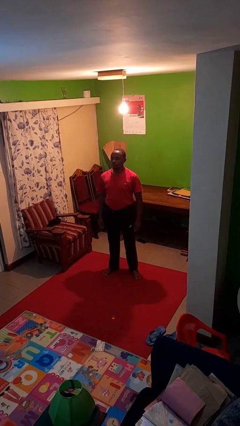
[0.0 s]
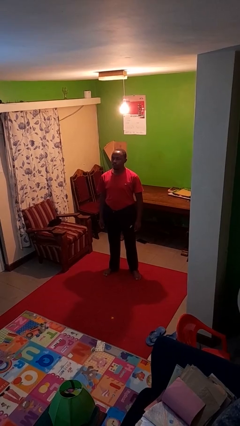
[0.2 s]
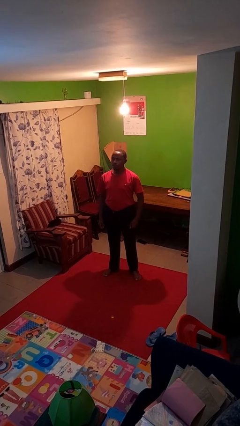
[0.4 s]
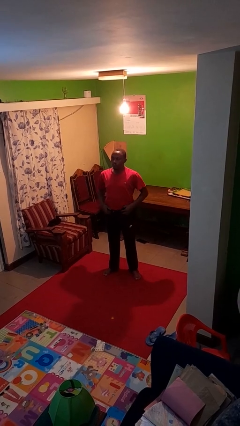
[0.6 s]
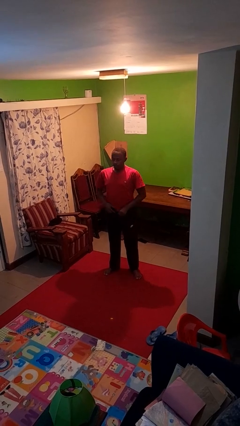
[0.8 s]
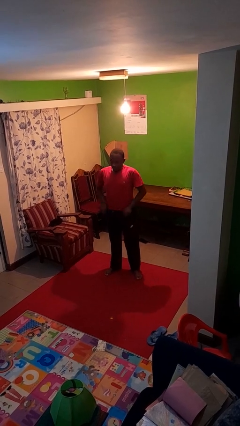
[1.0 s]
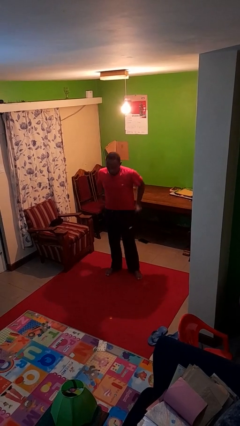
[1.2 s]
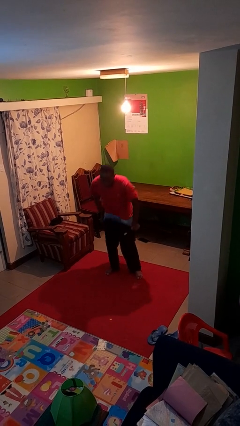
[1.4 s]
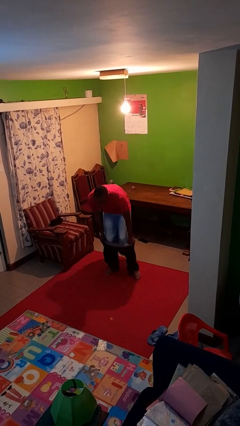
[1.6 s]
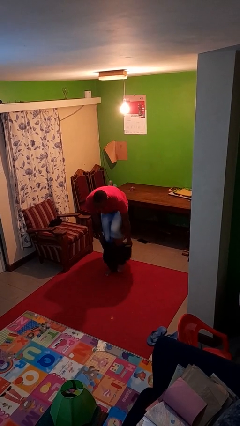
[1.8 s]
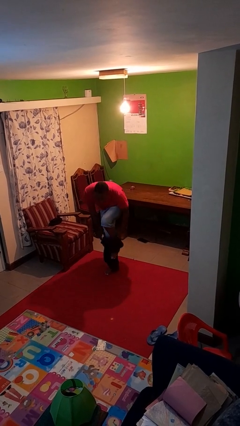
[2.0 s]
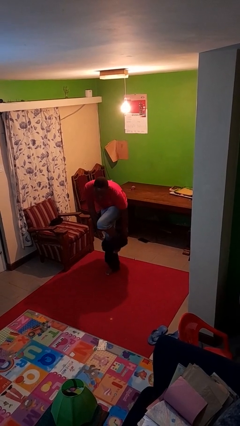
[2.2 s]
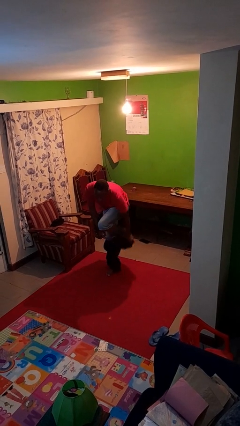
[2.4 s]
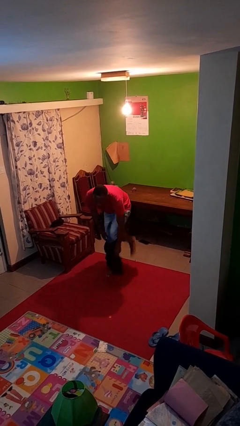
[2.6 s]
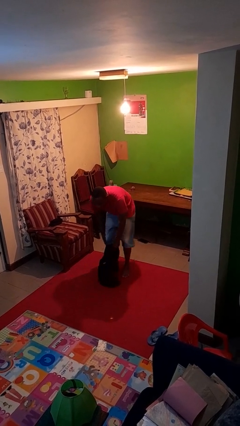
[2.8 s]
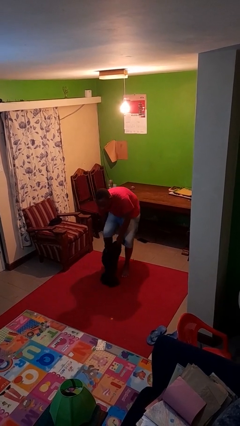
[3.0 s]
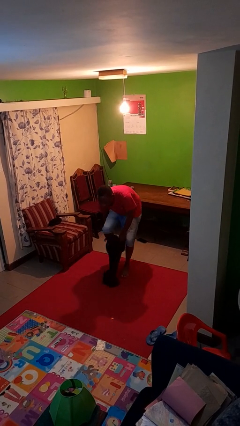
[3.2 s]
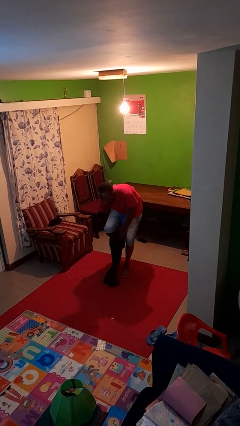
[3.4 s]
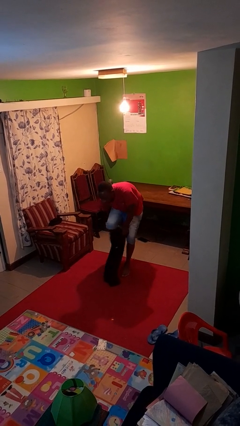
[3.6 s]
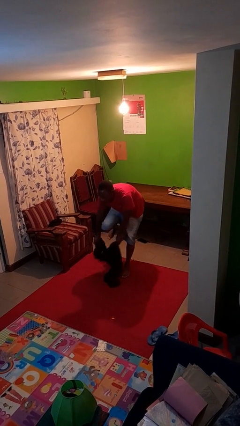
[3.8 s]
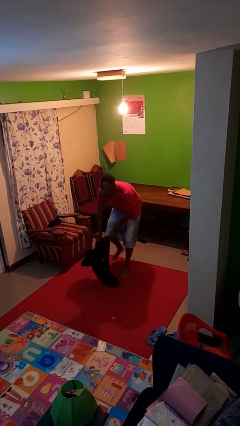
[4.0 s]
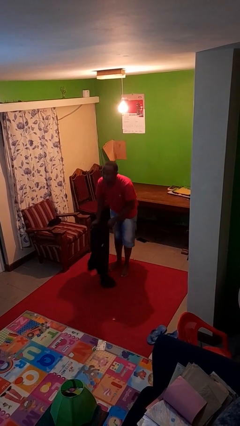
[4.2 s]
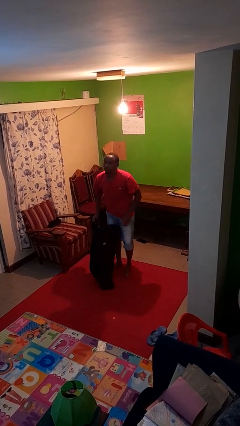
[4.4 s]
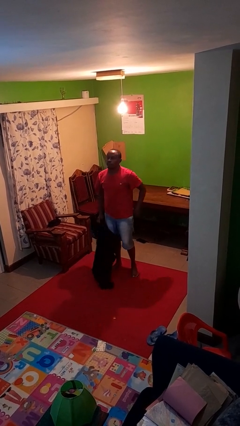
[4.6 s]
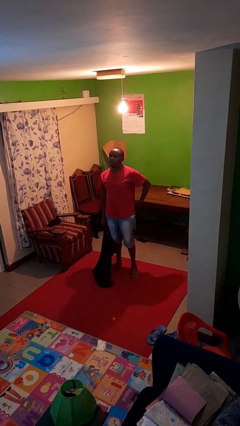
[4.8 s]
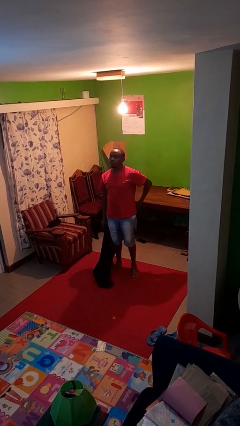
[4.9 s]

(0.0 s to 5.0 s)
person takes off pants

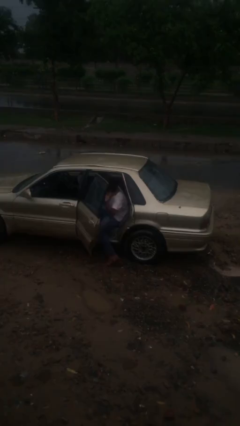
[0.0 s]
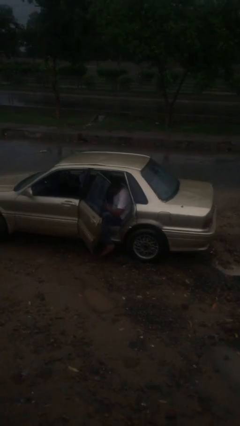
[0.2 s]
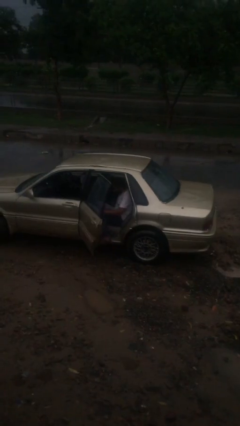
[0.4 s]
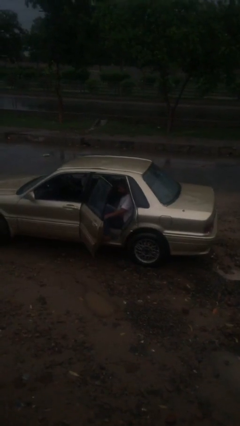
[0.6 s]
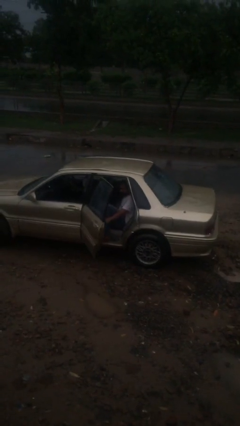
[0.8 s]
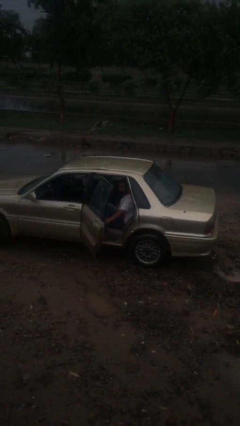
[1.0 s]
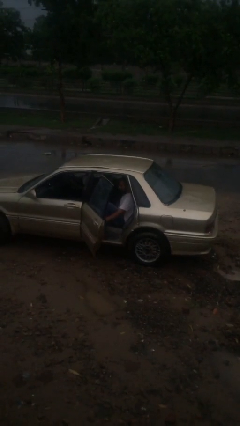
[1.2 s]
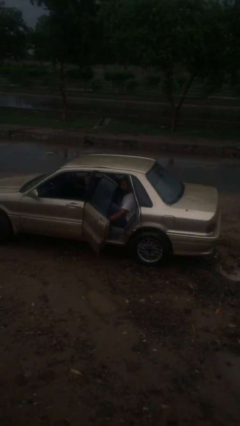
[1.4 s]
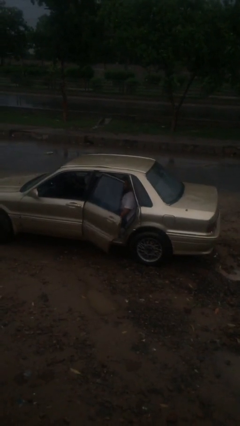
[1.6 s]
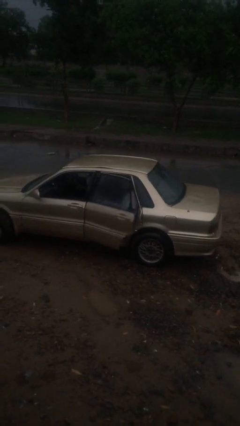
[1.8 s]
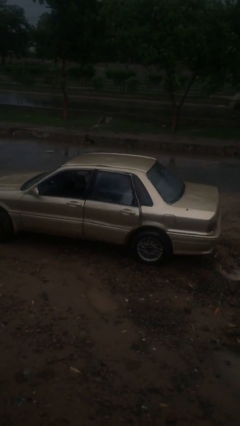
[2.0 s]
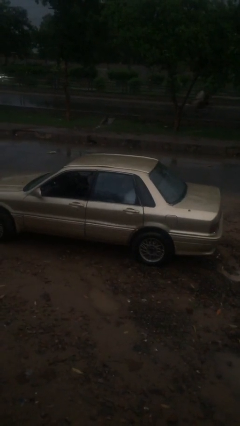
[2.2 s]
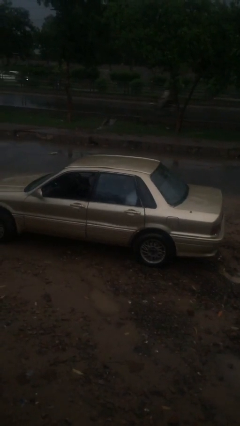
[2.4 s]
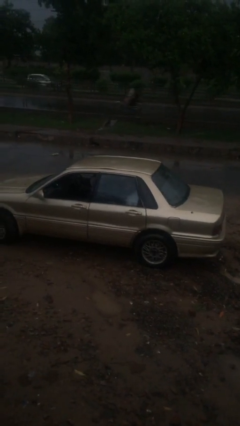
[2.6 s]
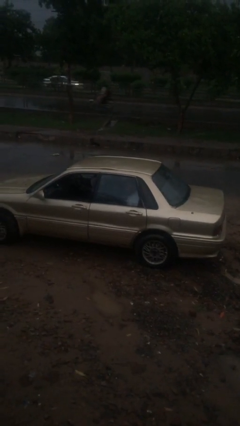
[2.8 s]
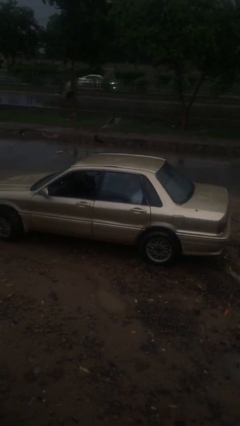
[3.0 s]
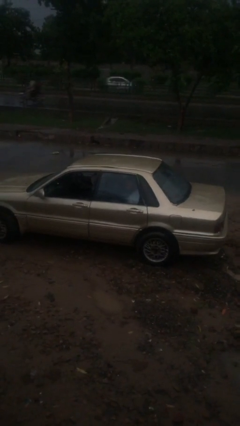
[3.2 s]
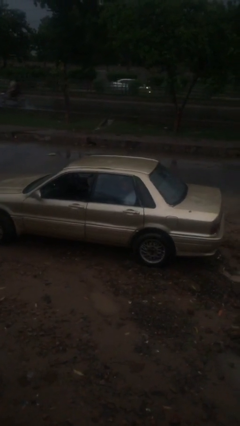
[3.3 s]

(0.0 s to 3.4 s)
person closes car door

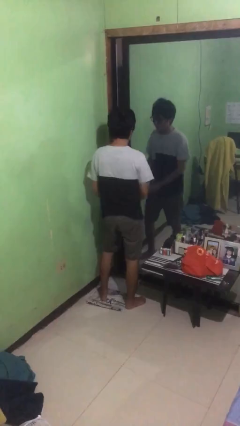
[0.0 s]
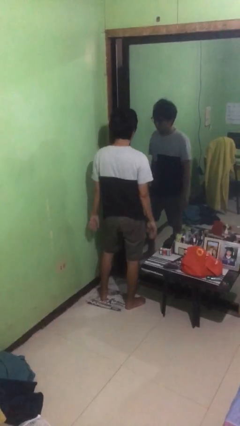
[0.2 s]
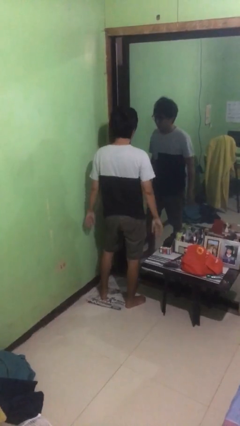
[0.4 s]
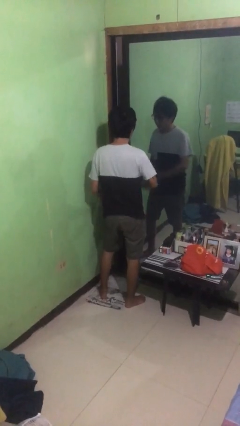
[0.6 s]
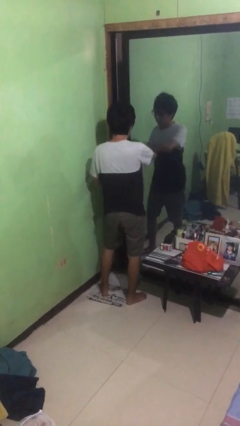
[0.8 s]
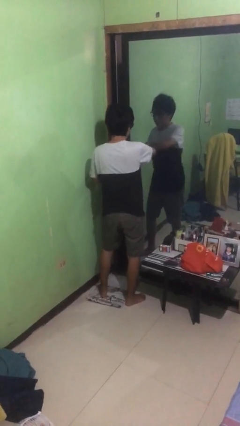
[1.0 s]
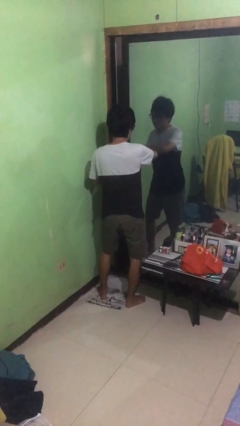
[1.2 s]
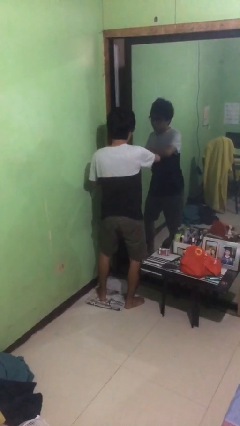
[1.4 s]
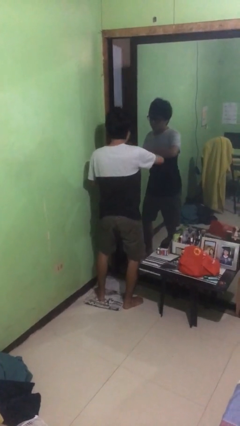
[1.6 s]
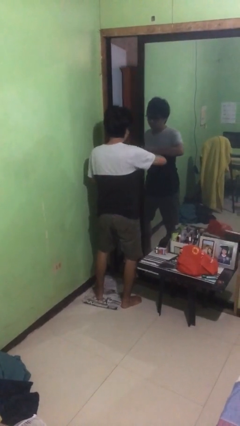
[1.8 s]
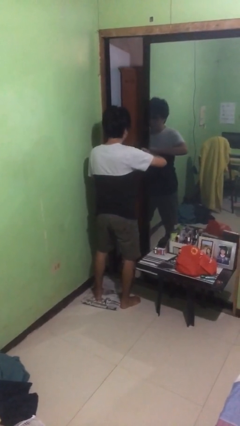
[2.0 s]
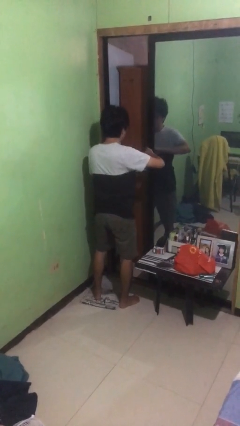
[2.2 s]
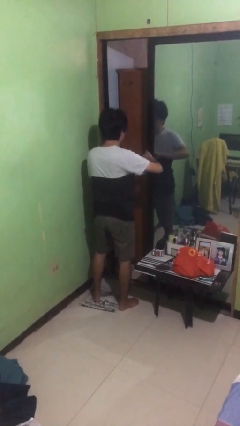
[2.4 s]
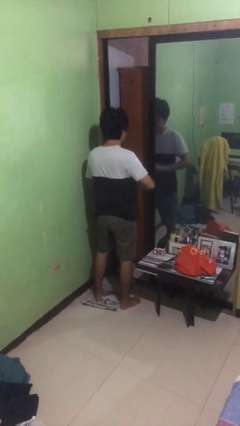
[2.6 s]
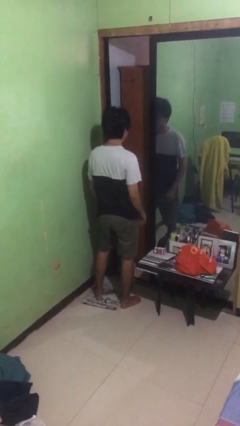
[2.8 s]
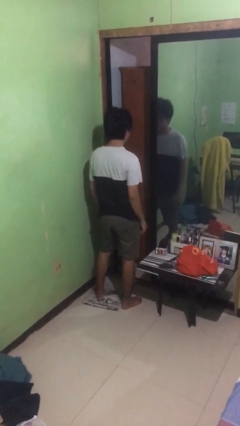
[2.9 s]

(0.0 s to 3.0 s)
person opens sliding door

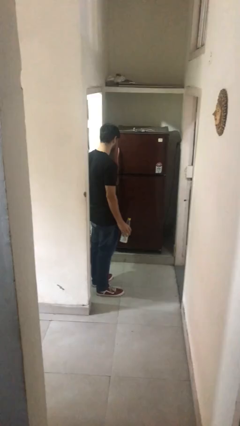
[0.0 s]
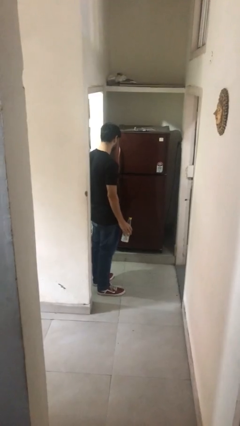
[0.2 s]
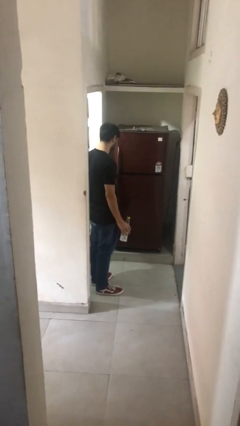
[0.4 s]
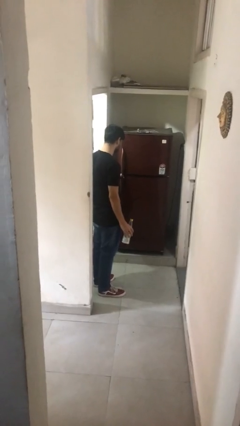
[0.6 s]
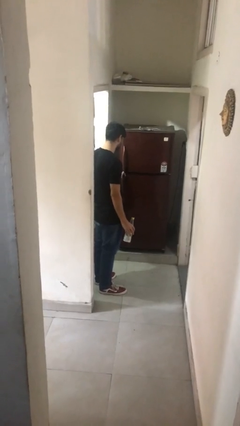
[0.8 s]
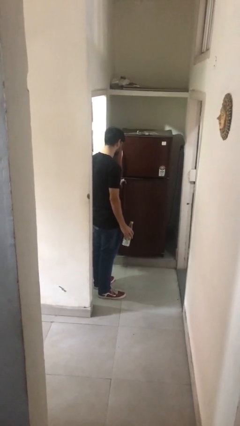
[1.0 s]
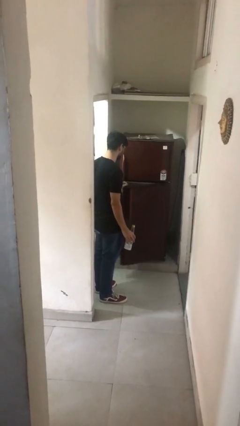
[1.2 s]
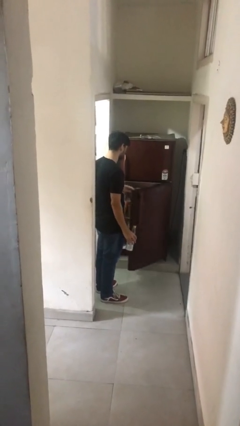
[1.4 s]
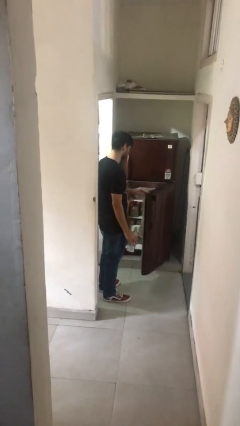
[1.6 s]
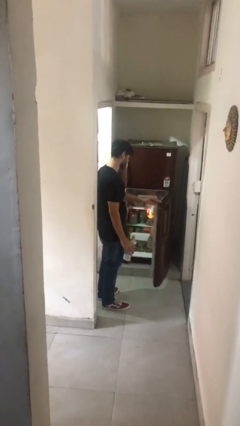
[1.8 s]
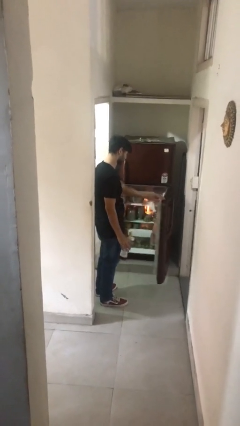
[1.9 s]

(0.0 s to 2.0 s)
person opens refrigerator

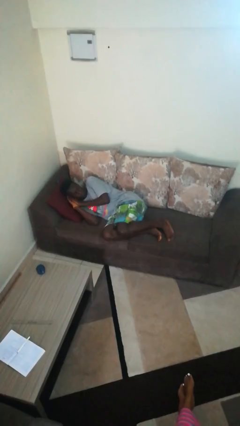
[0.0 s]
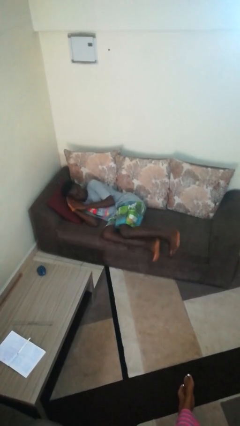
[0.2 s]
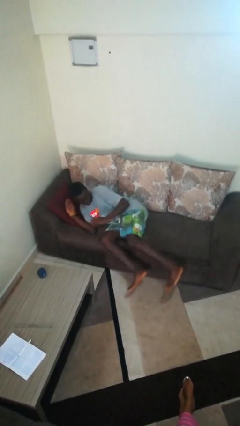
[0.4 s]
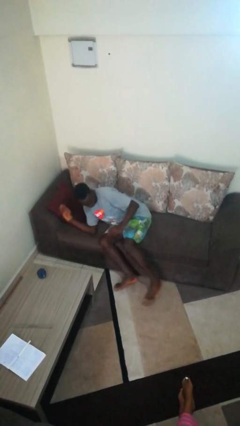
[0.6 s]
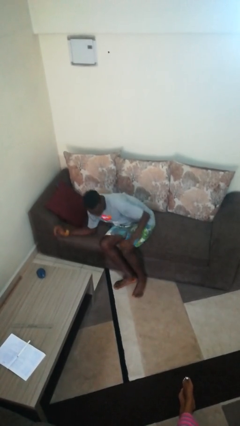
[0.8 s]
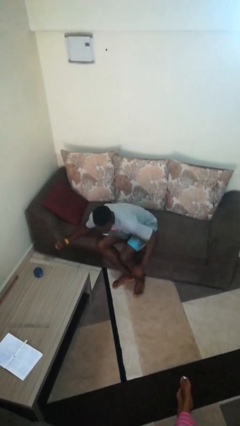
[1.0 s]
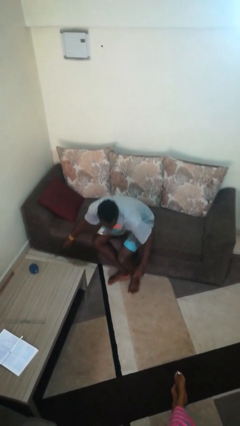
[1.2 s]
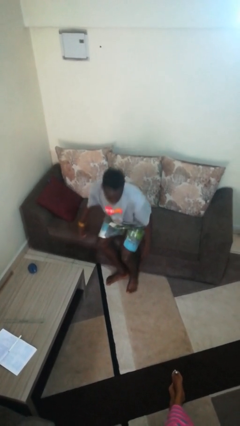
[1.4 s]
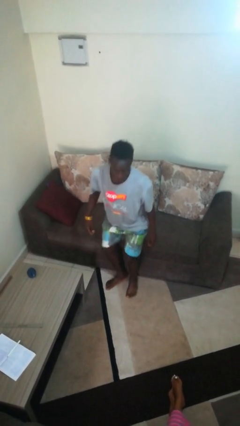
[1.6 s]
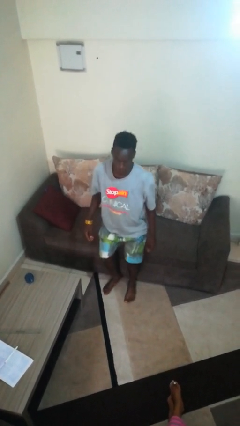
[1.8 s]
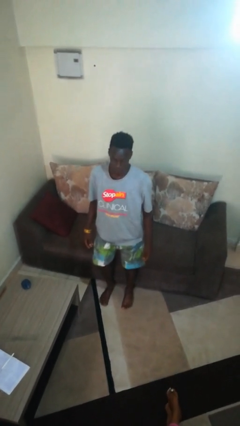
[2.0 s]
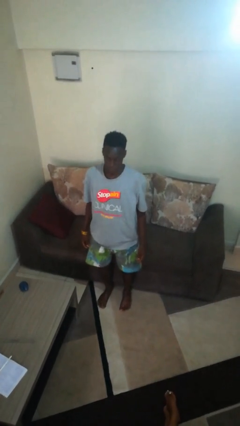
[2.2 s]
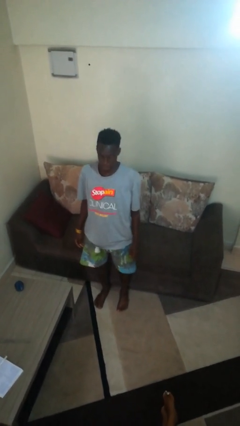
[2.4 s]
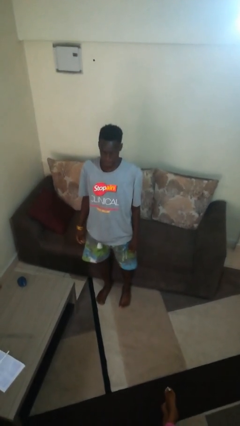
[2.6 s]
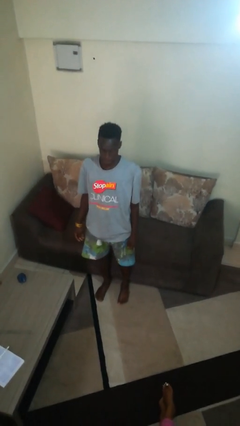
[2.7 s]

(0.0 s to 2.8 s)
person stands up
